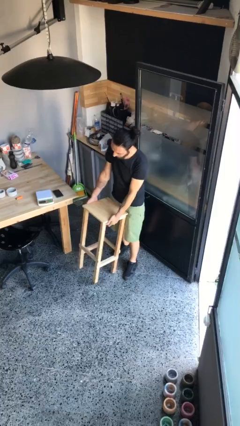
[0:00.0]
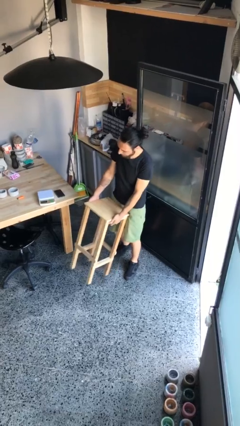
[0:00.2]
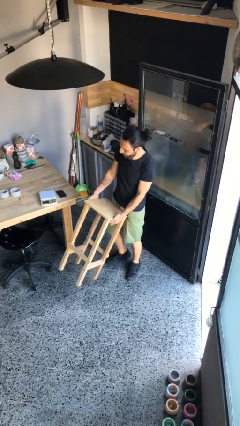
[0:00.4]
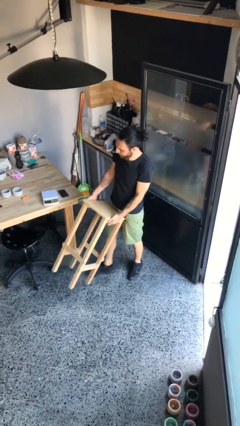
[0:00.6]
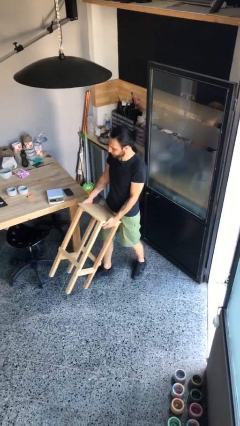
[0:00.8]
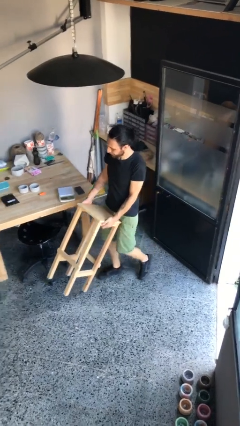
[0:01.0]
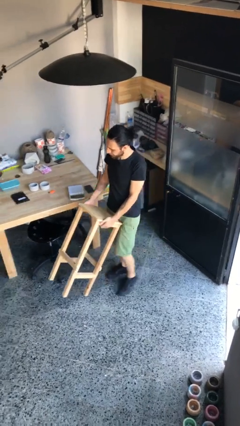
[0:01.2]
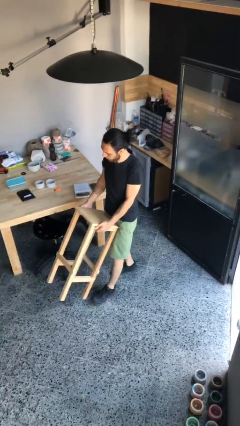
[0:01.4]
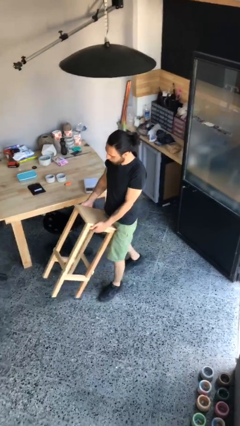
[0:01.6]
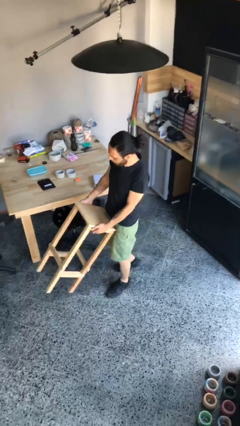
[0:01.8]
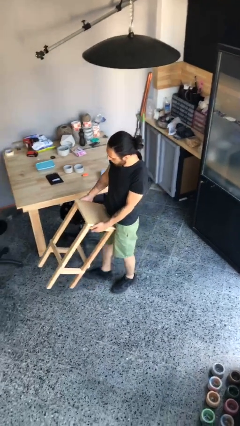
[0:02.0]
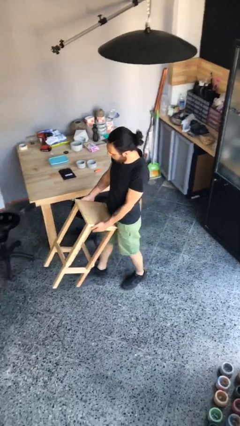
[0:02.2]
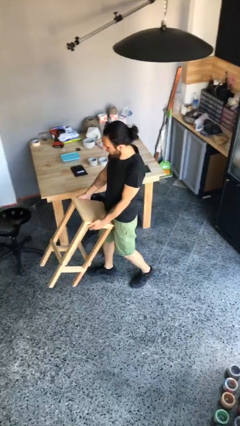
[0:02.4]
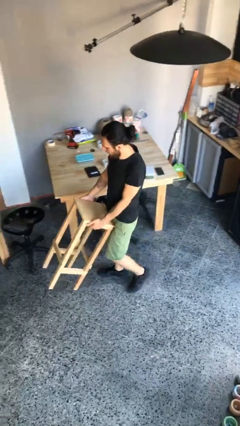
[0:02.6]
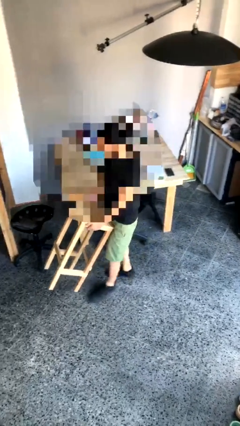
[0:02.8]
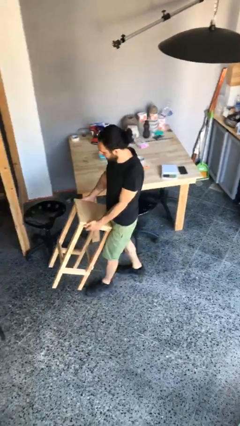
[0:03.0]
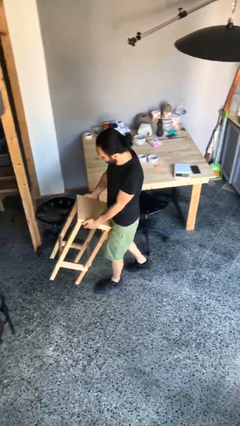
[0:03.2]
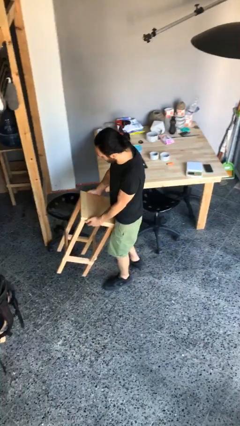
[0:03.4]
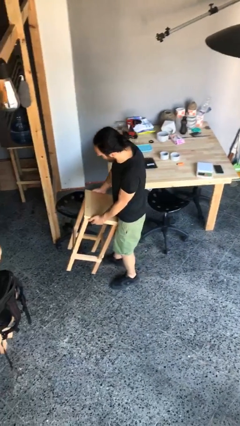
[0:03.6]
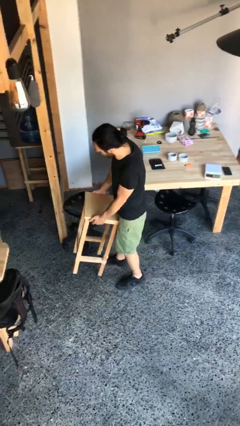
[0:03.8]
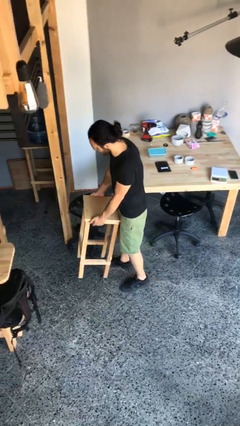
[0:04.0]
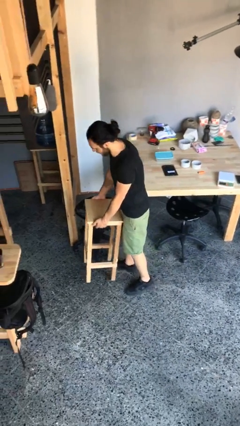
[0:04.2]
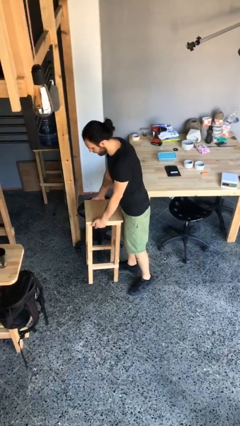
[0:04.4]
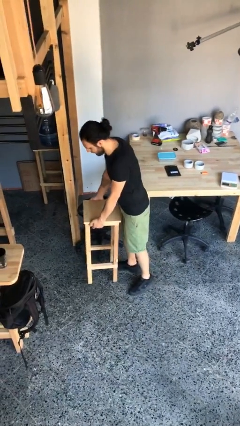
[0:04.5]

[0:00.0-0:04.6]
person carries heavy object

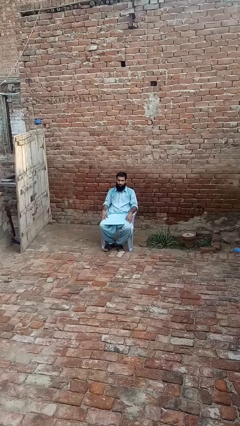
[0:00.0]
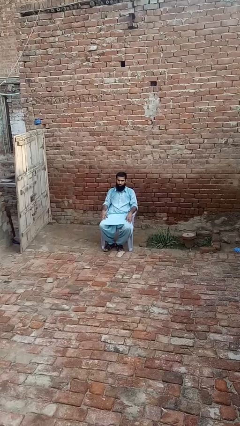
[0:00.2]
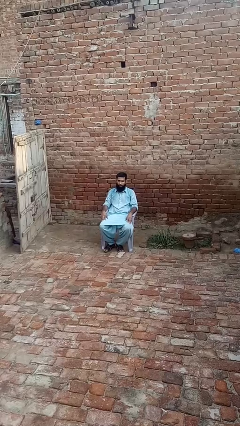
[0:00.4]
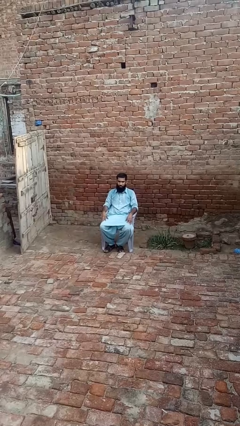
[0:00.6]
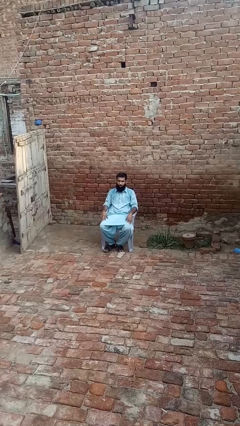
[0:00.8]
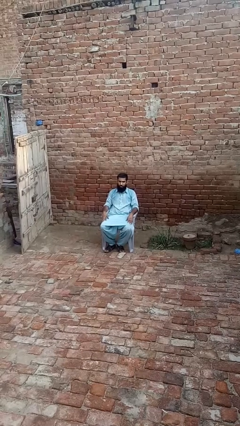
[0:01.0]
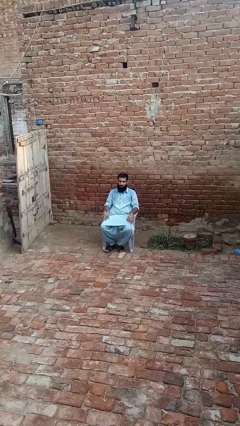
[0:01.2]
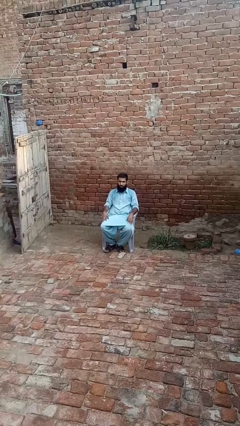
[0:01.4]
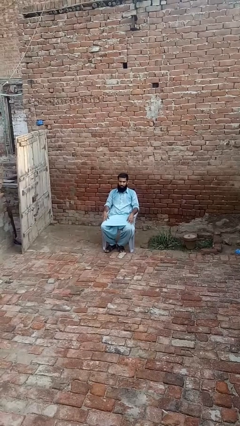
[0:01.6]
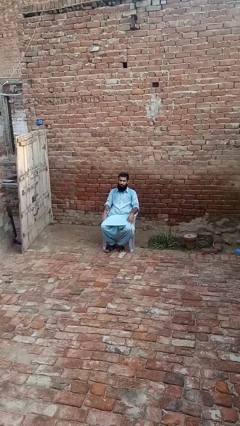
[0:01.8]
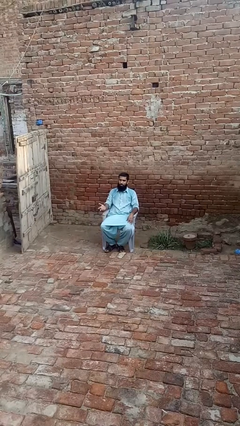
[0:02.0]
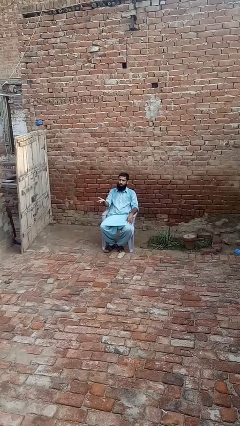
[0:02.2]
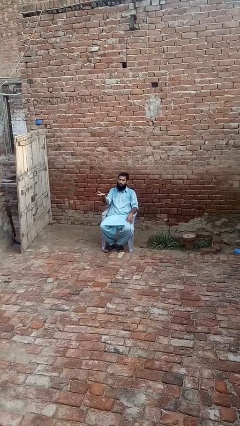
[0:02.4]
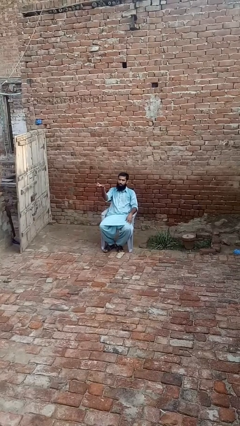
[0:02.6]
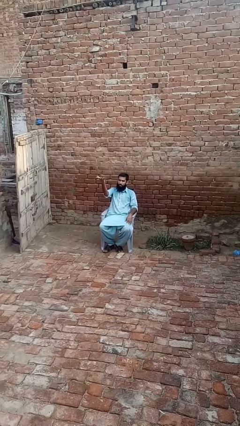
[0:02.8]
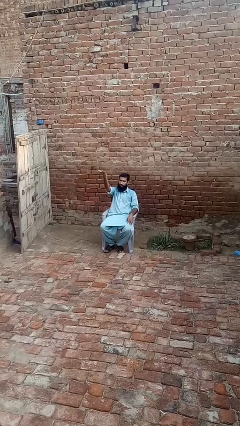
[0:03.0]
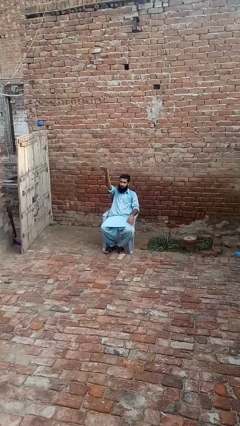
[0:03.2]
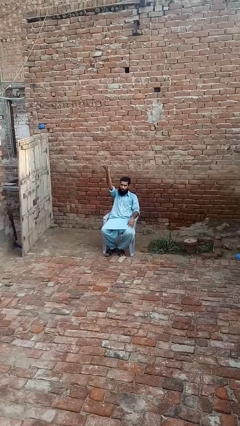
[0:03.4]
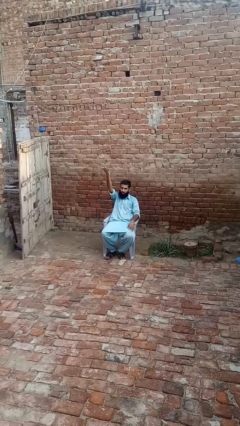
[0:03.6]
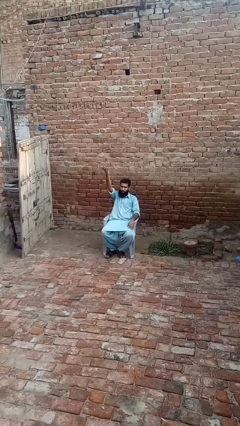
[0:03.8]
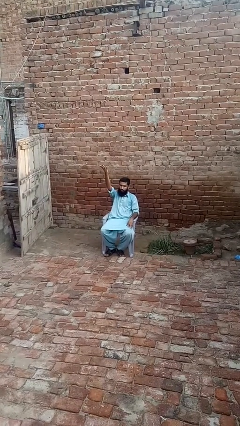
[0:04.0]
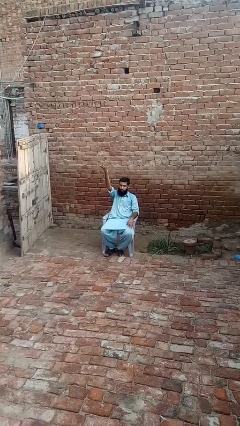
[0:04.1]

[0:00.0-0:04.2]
person gestures swipe up

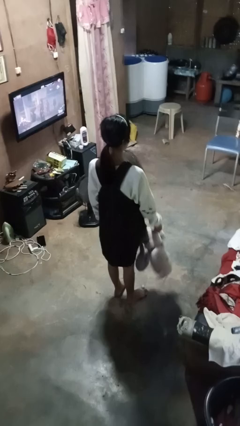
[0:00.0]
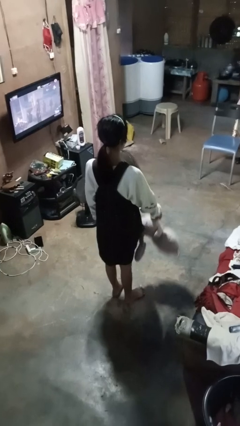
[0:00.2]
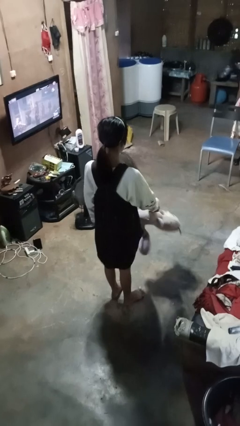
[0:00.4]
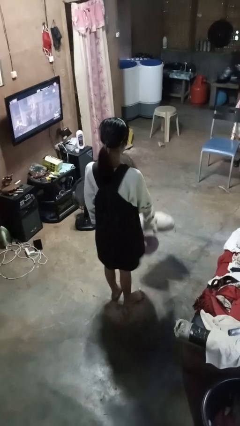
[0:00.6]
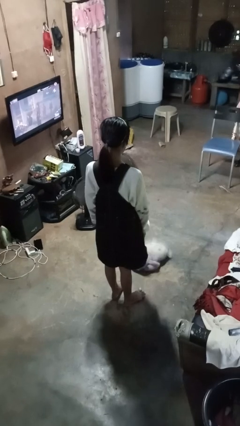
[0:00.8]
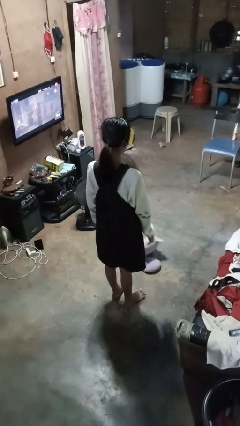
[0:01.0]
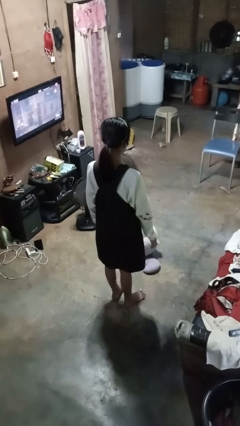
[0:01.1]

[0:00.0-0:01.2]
person throws object to ground

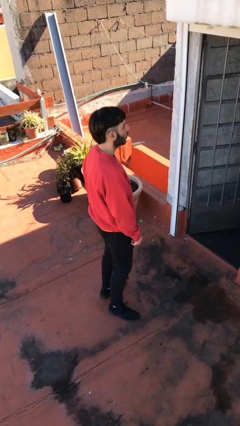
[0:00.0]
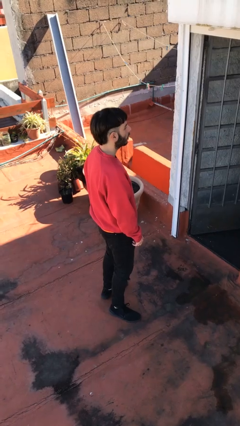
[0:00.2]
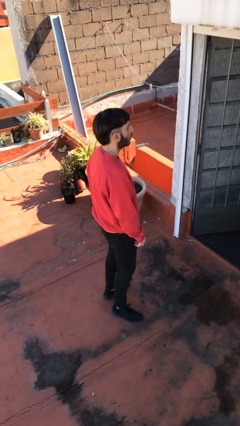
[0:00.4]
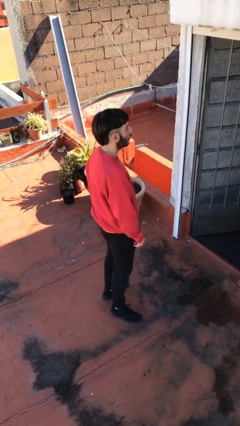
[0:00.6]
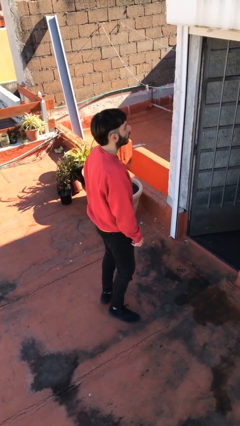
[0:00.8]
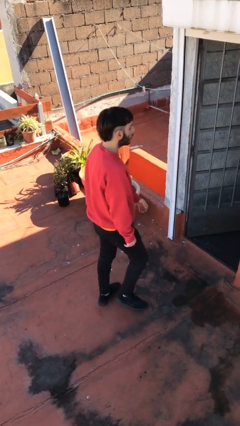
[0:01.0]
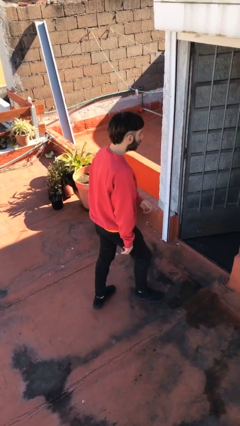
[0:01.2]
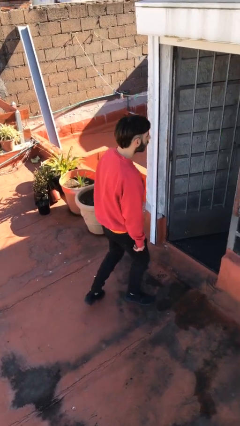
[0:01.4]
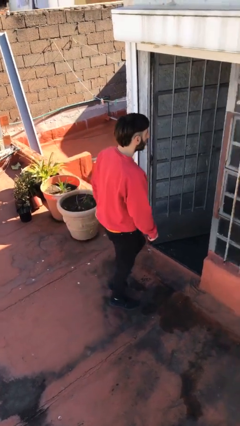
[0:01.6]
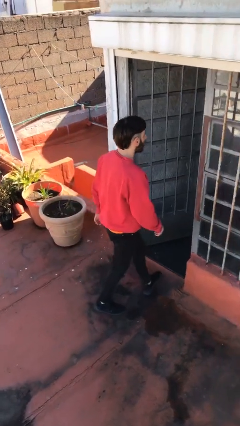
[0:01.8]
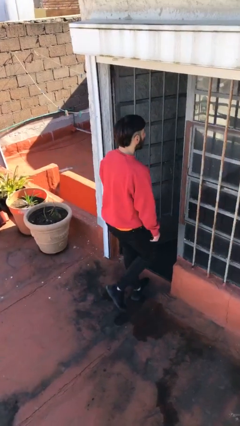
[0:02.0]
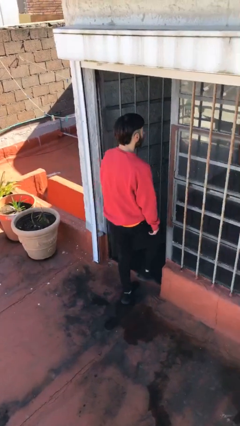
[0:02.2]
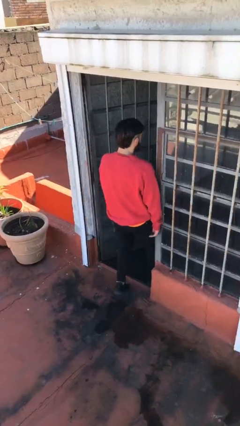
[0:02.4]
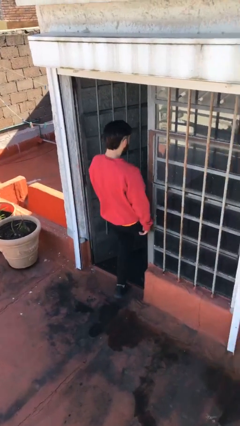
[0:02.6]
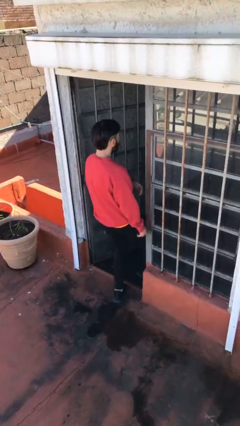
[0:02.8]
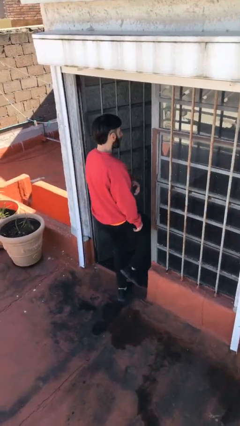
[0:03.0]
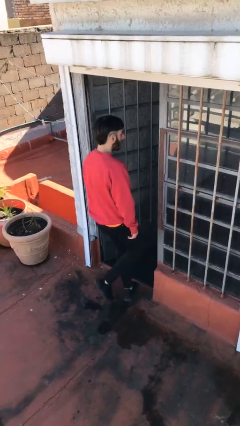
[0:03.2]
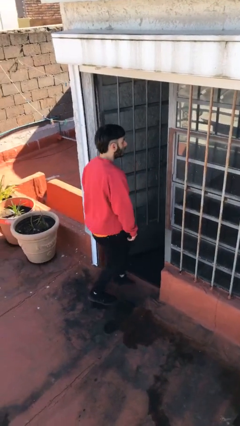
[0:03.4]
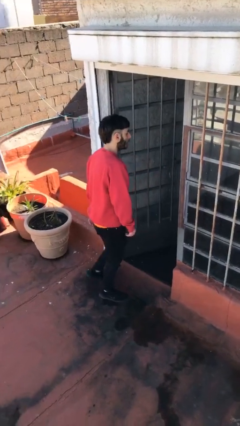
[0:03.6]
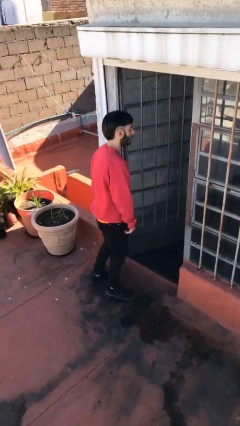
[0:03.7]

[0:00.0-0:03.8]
person bumps into wall

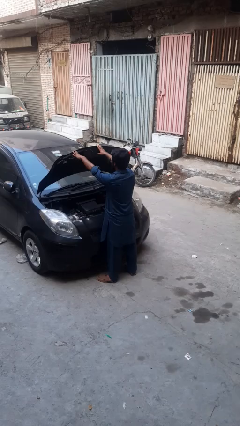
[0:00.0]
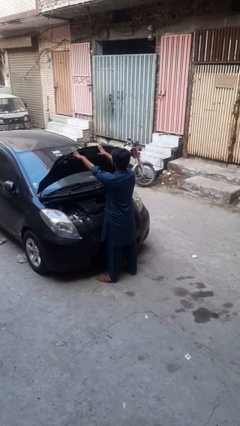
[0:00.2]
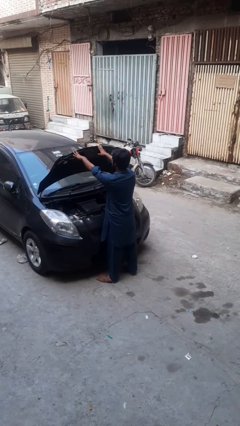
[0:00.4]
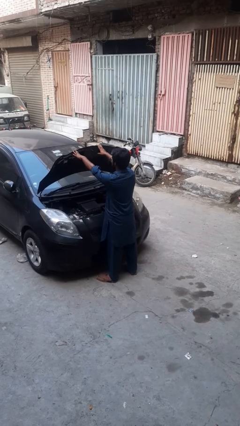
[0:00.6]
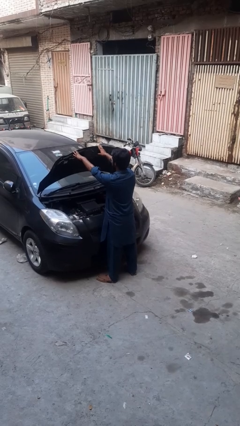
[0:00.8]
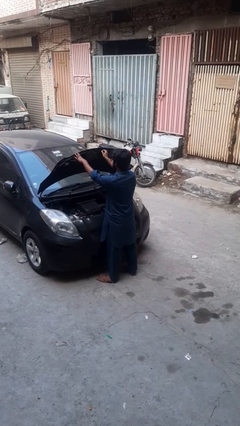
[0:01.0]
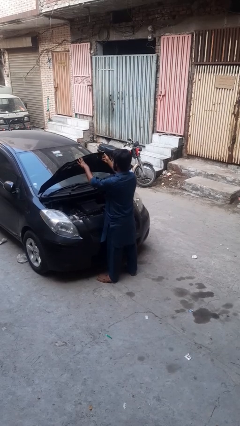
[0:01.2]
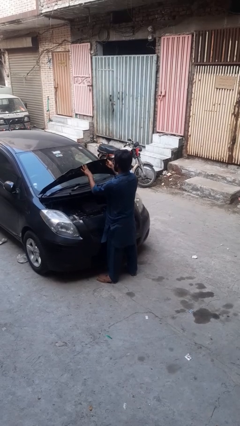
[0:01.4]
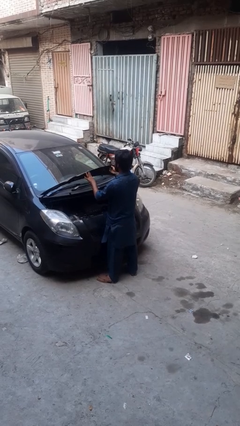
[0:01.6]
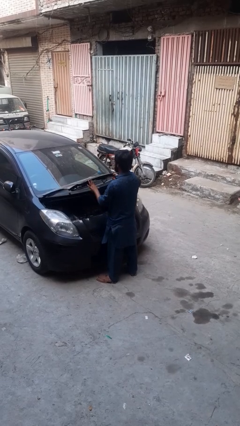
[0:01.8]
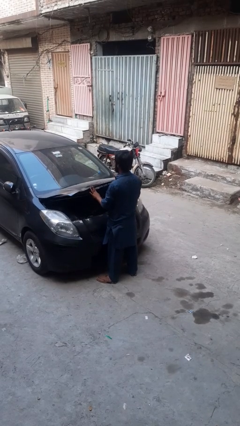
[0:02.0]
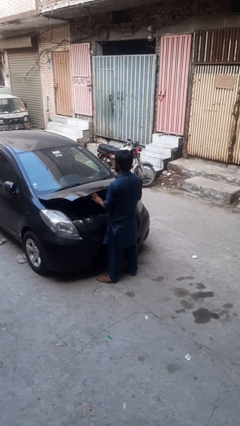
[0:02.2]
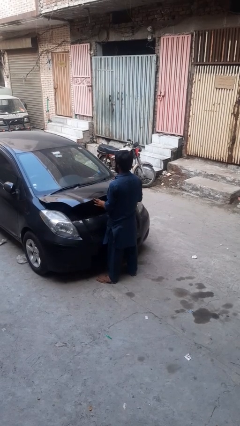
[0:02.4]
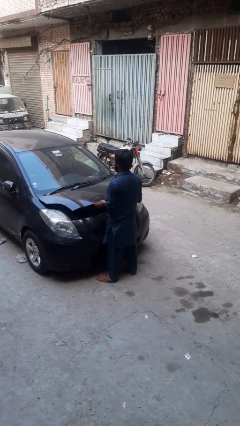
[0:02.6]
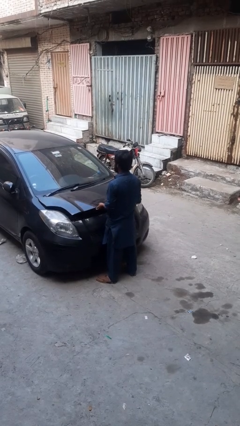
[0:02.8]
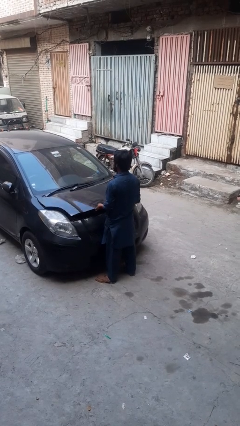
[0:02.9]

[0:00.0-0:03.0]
person closes car hood

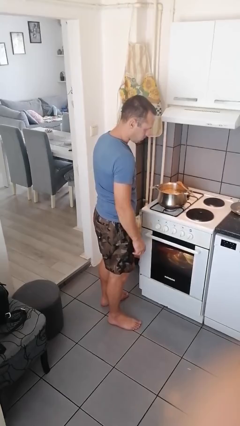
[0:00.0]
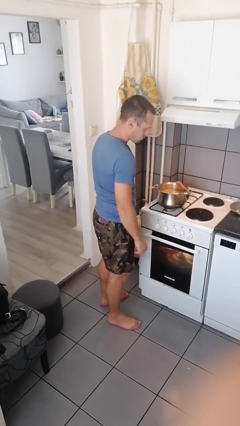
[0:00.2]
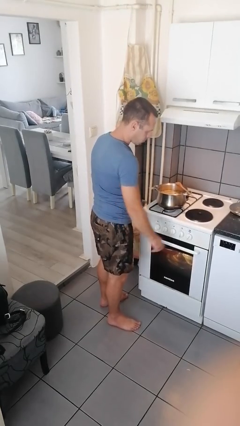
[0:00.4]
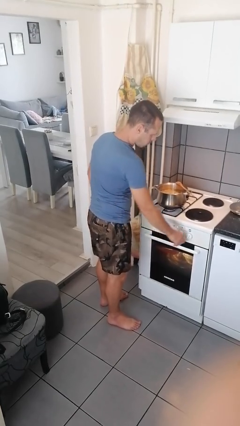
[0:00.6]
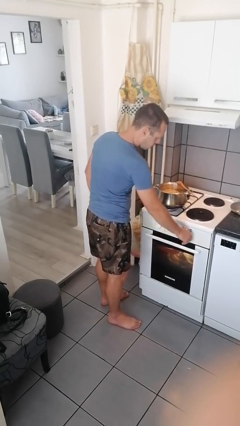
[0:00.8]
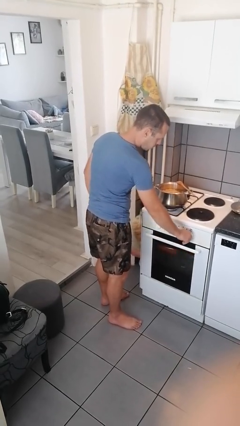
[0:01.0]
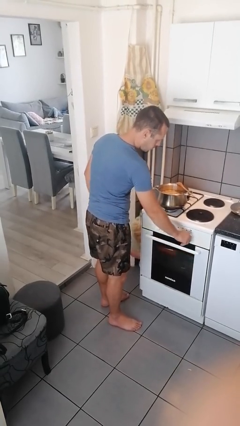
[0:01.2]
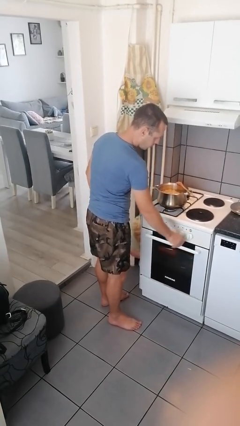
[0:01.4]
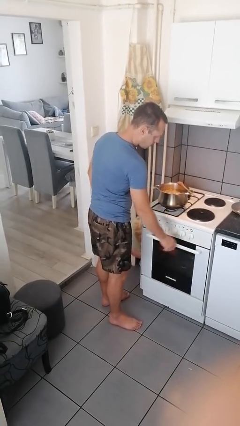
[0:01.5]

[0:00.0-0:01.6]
person turns off stovetop
